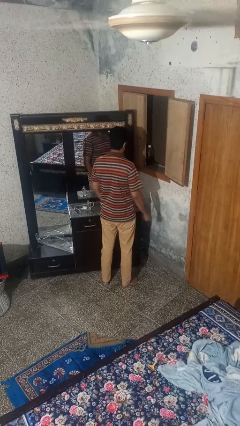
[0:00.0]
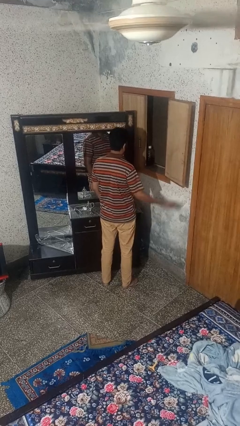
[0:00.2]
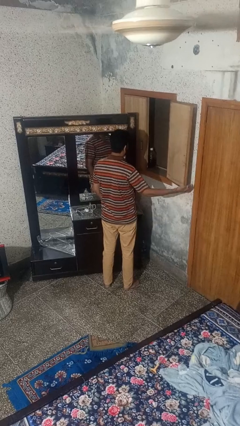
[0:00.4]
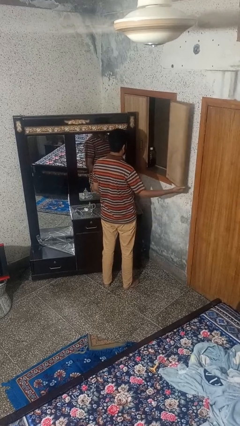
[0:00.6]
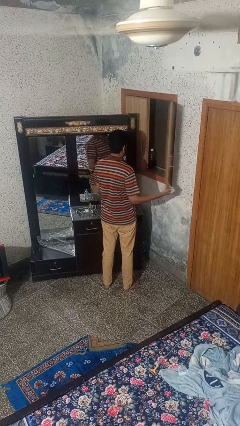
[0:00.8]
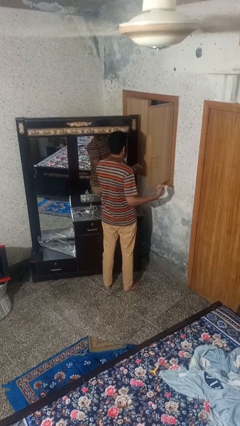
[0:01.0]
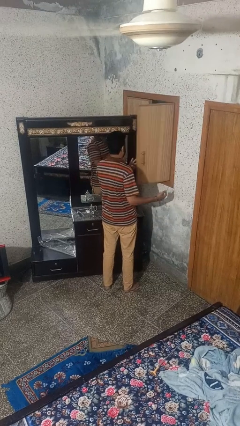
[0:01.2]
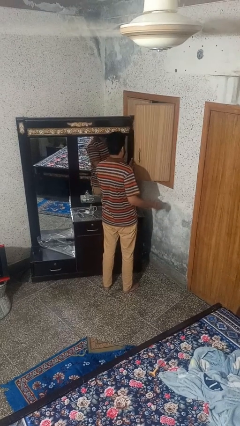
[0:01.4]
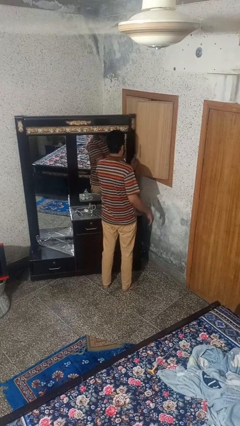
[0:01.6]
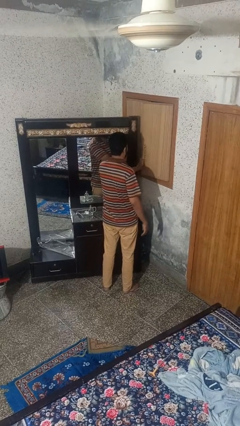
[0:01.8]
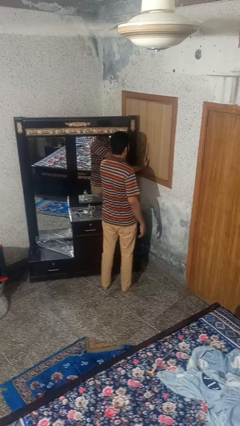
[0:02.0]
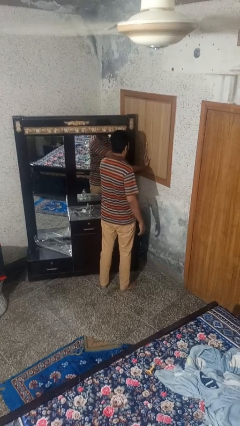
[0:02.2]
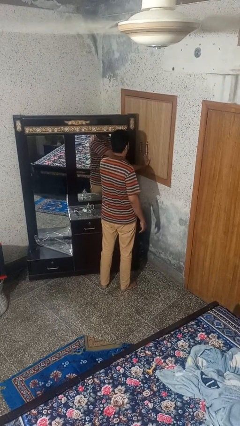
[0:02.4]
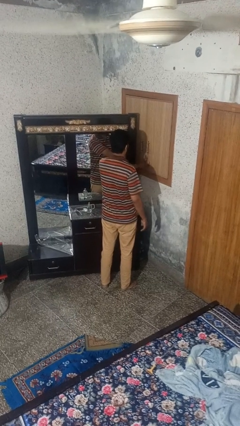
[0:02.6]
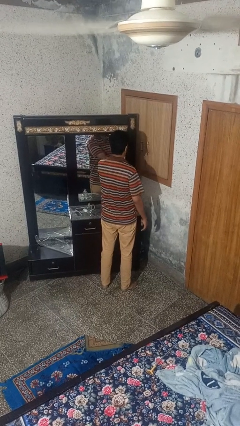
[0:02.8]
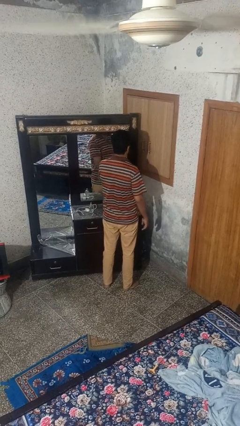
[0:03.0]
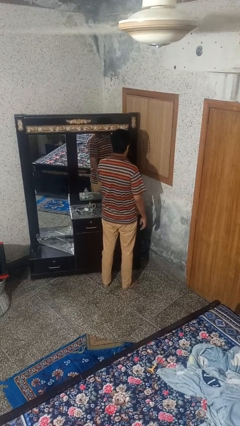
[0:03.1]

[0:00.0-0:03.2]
person closes home window

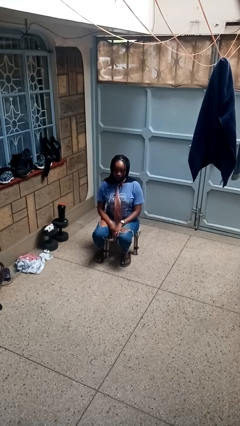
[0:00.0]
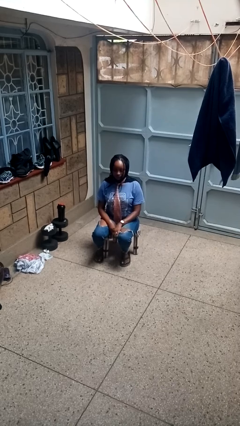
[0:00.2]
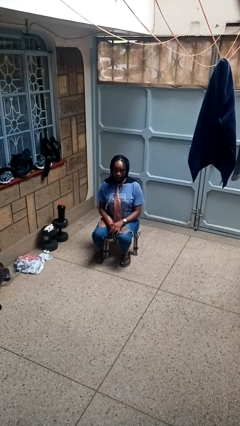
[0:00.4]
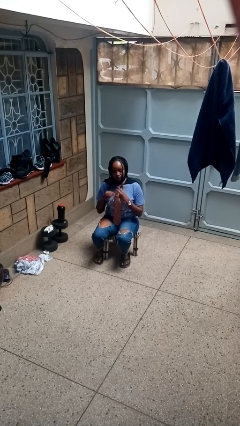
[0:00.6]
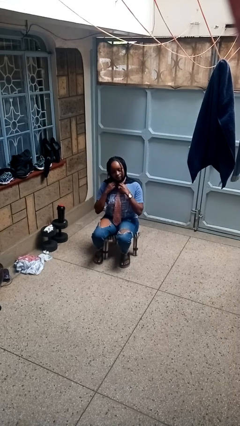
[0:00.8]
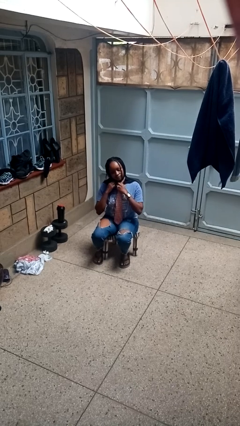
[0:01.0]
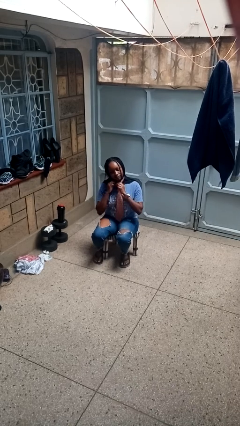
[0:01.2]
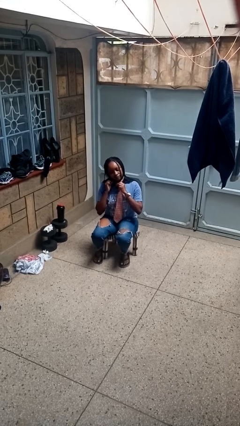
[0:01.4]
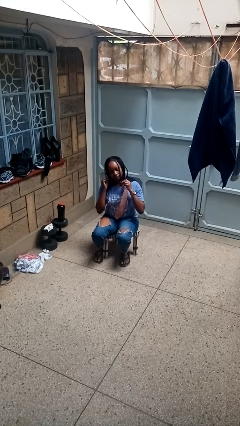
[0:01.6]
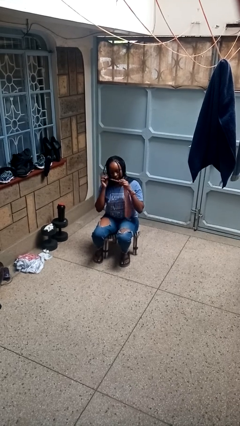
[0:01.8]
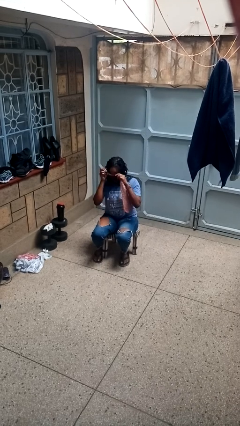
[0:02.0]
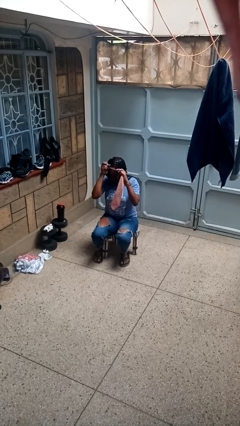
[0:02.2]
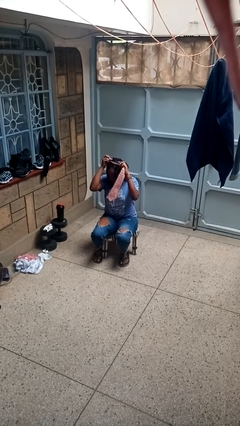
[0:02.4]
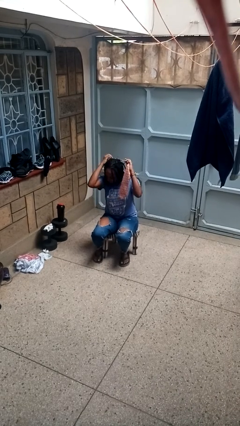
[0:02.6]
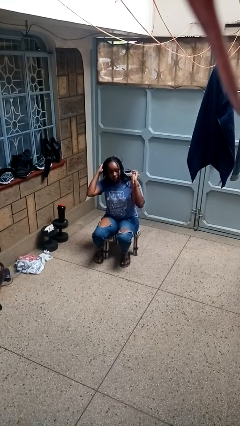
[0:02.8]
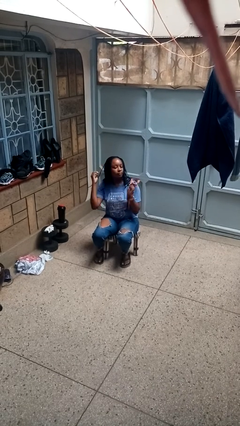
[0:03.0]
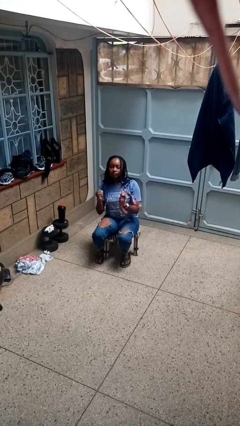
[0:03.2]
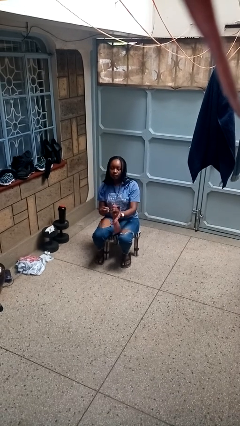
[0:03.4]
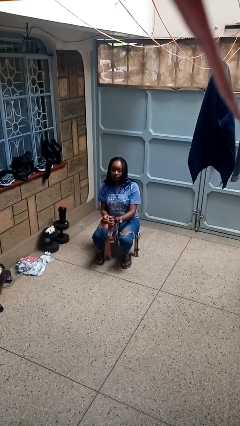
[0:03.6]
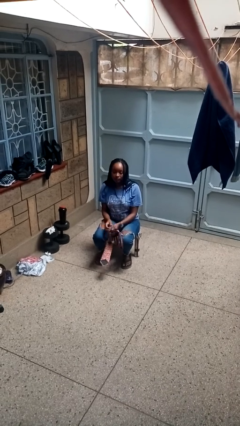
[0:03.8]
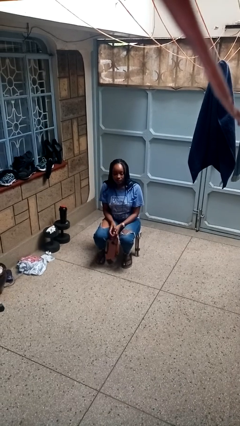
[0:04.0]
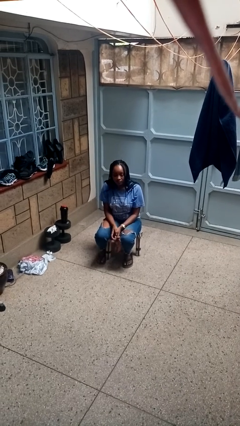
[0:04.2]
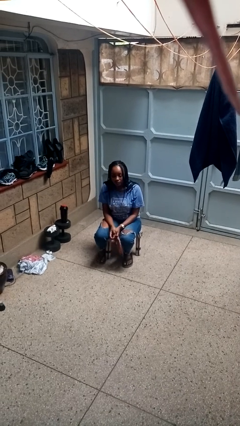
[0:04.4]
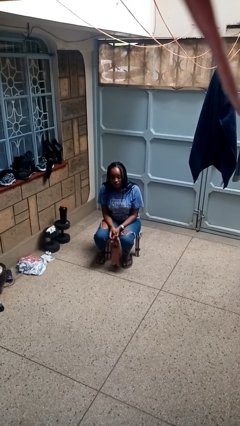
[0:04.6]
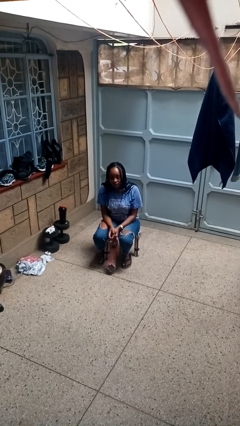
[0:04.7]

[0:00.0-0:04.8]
person takes off necktie

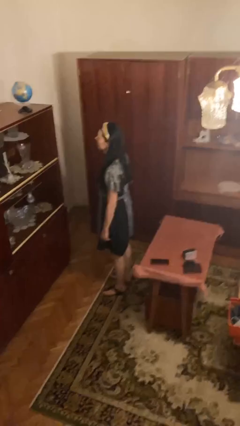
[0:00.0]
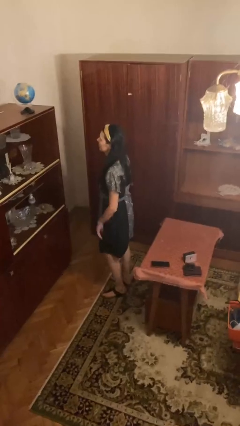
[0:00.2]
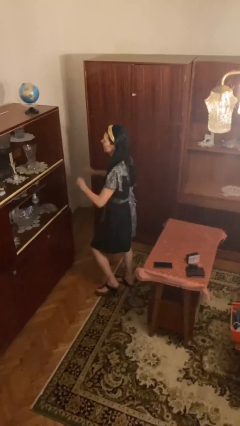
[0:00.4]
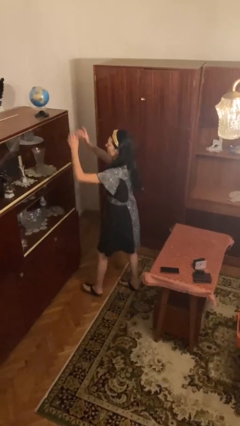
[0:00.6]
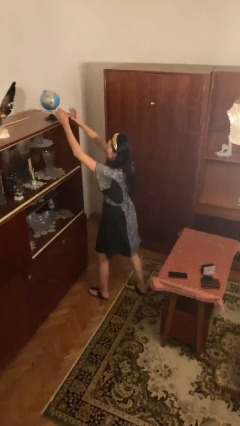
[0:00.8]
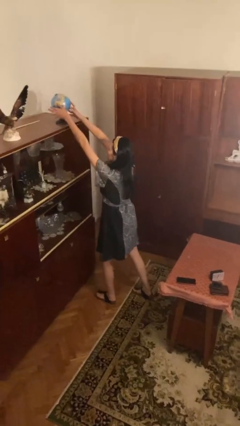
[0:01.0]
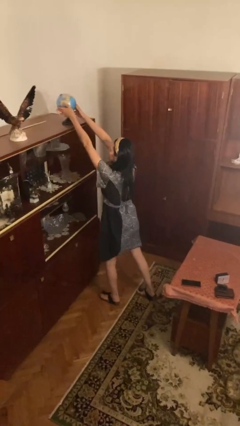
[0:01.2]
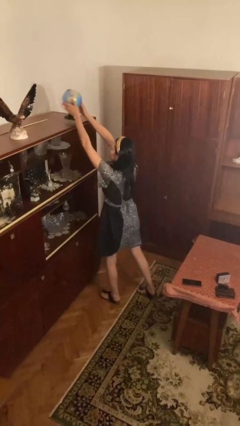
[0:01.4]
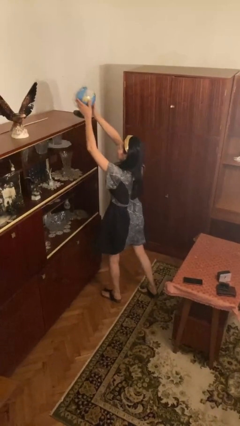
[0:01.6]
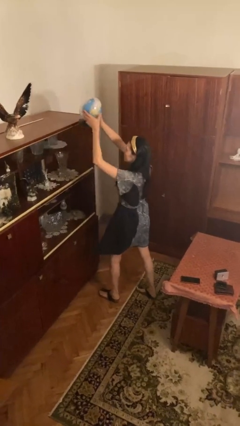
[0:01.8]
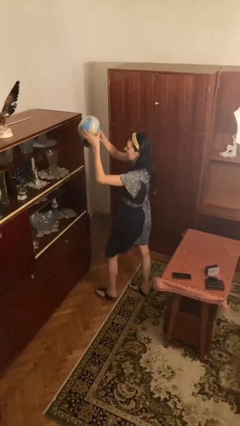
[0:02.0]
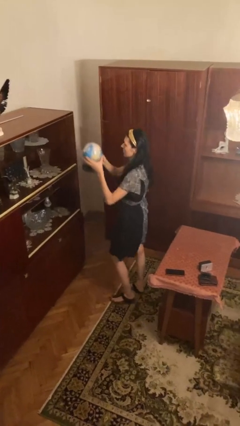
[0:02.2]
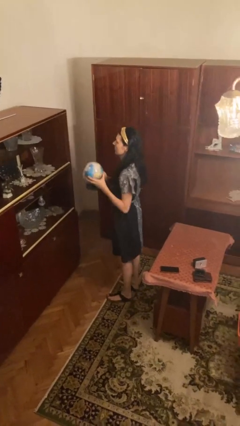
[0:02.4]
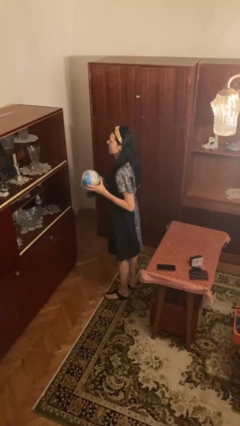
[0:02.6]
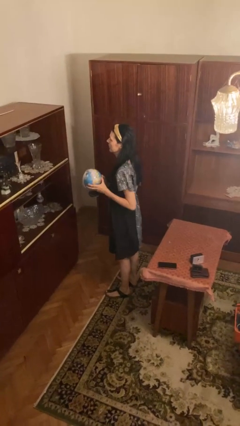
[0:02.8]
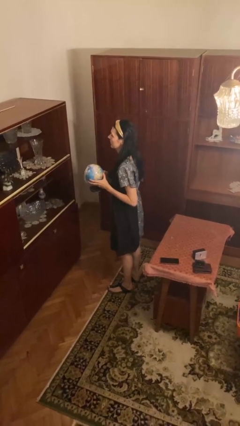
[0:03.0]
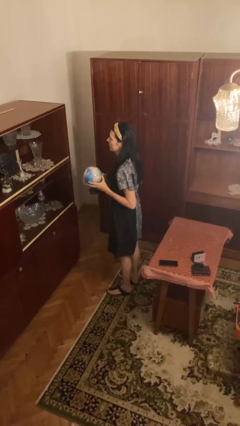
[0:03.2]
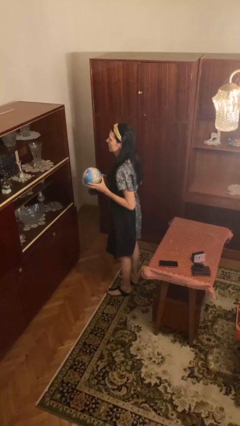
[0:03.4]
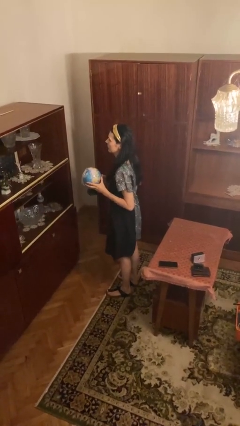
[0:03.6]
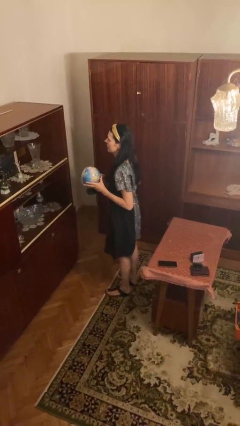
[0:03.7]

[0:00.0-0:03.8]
person picks up object from countertop

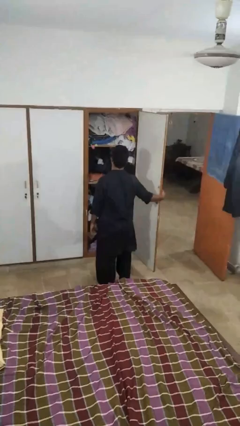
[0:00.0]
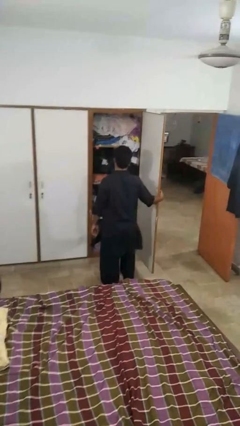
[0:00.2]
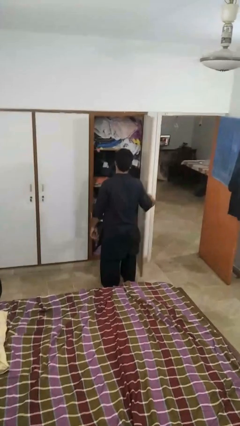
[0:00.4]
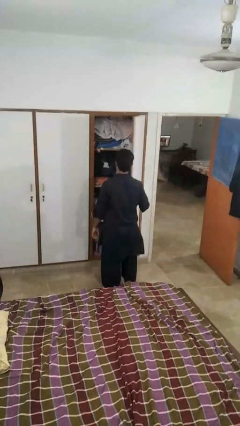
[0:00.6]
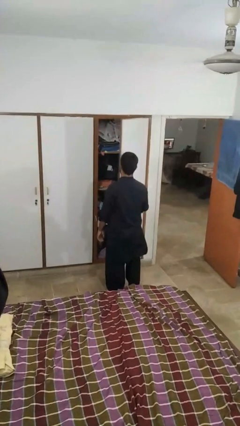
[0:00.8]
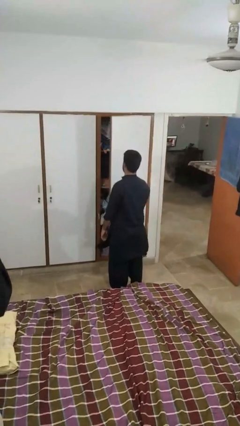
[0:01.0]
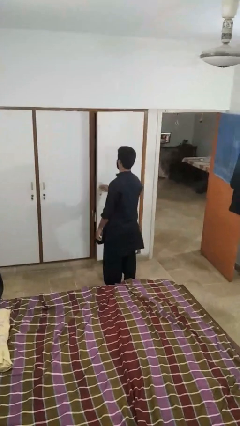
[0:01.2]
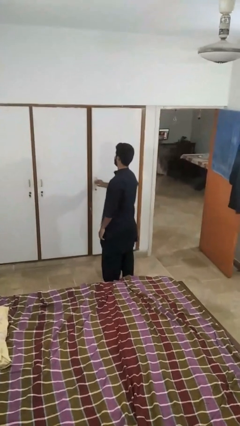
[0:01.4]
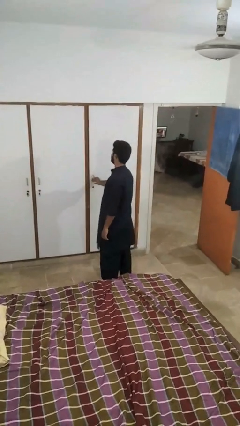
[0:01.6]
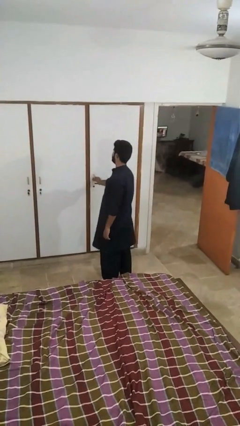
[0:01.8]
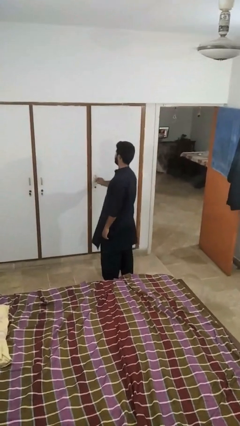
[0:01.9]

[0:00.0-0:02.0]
person closes closet door

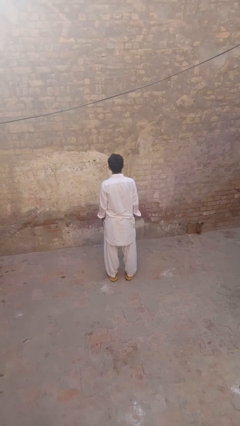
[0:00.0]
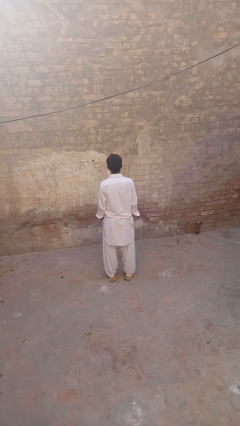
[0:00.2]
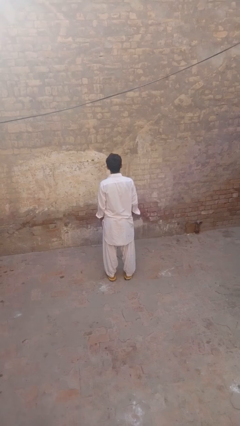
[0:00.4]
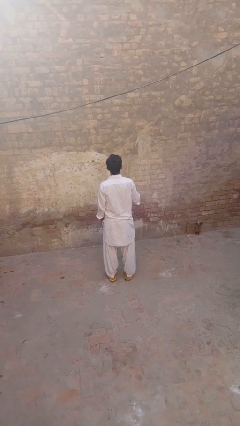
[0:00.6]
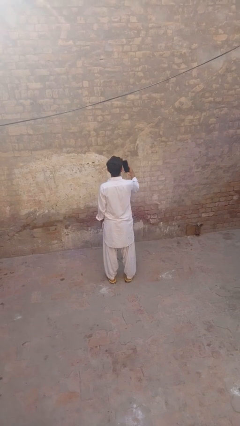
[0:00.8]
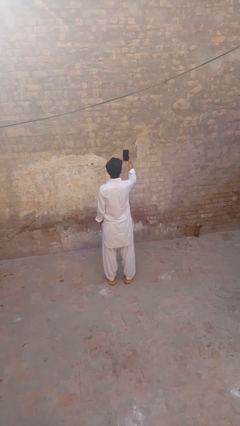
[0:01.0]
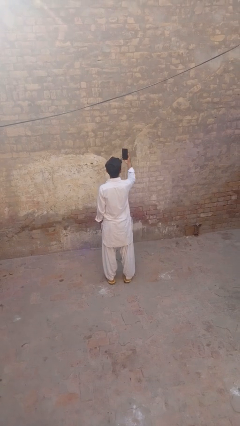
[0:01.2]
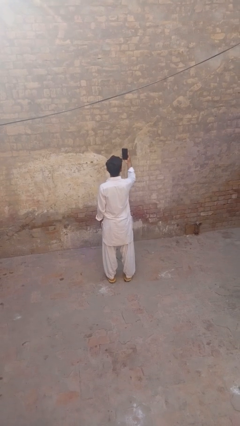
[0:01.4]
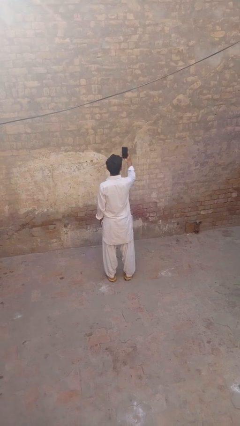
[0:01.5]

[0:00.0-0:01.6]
person takes selfie

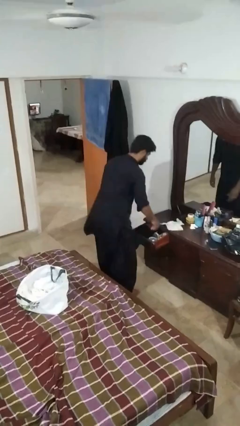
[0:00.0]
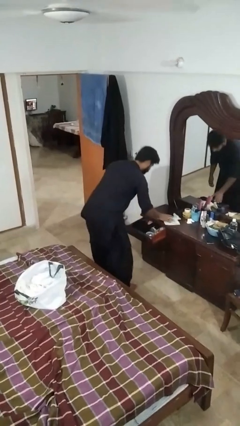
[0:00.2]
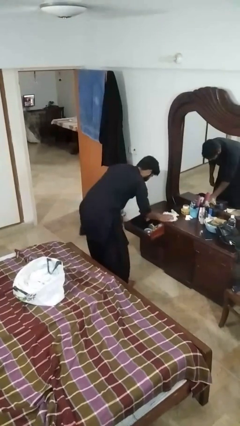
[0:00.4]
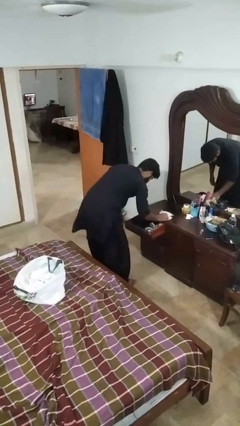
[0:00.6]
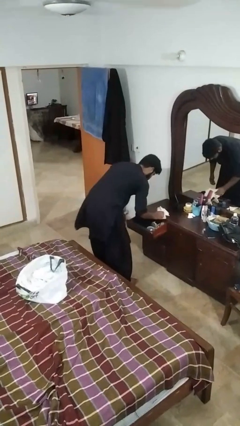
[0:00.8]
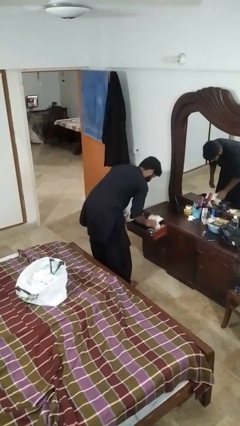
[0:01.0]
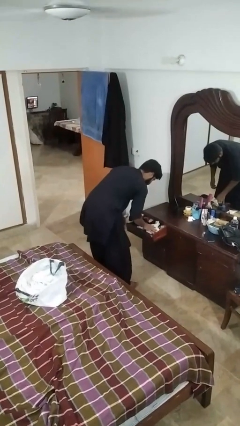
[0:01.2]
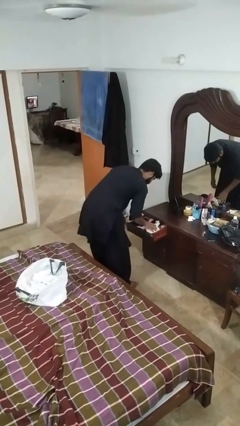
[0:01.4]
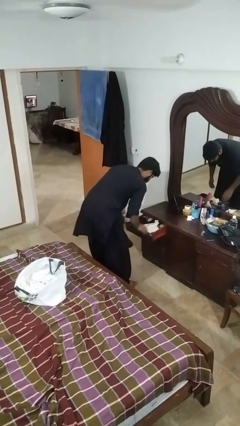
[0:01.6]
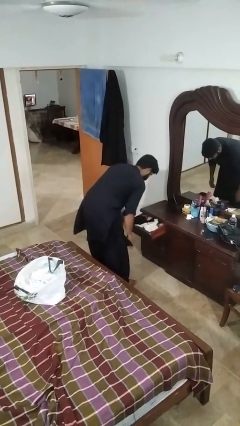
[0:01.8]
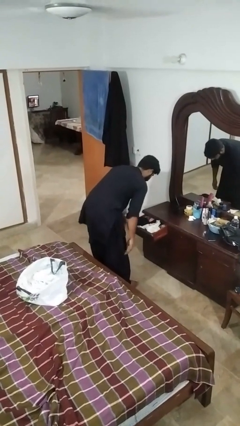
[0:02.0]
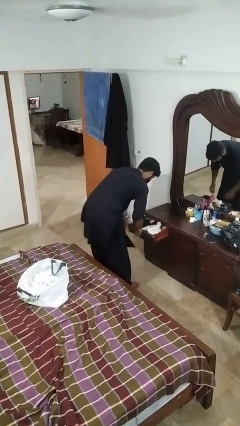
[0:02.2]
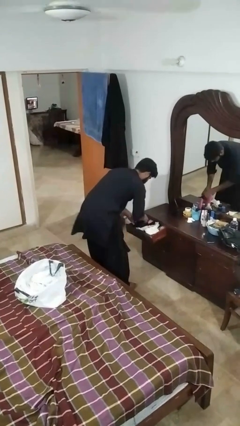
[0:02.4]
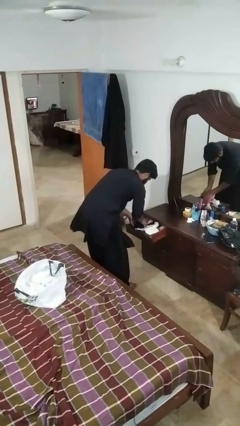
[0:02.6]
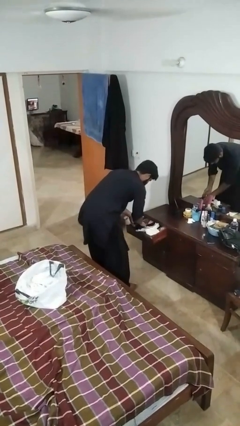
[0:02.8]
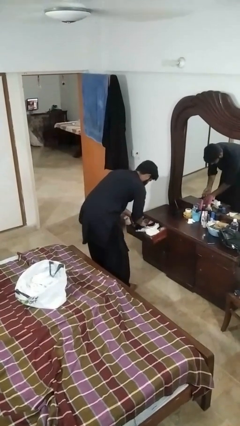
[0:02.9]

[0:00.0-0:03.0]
person puts clothes into dresser
